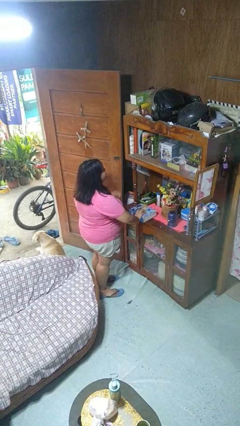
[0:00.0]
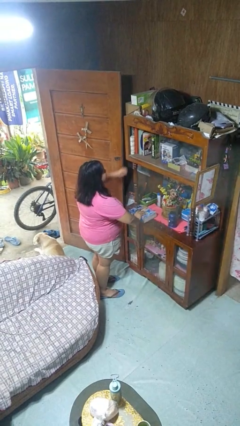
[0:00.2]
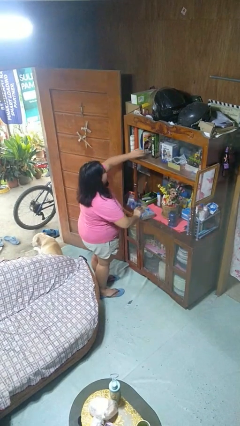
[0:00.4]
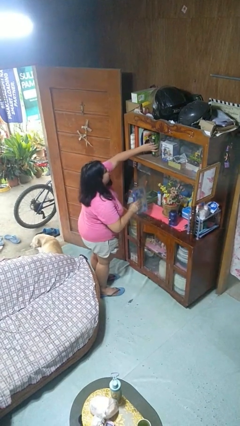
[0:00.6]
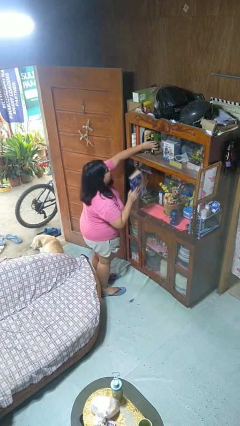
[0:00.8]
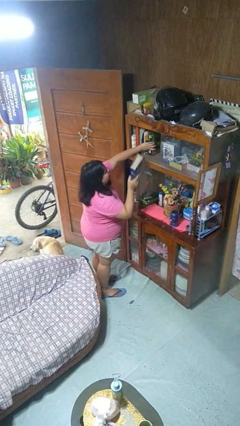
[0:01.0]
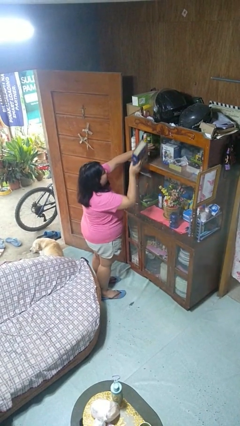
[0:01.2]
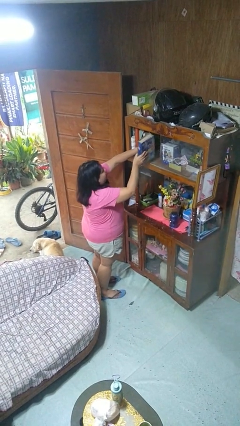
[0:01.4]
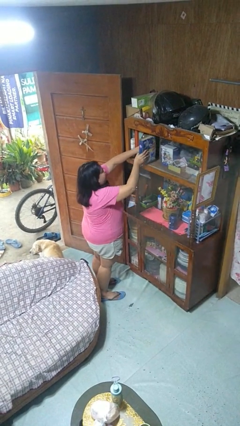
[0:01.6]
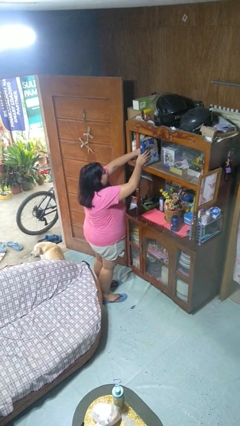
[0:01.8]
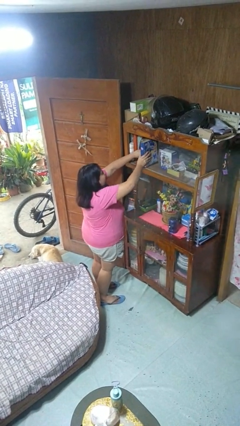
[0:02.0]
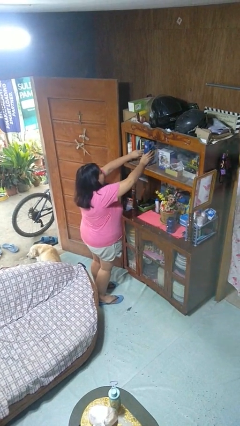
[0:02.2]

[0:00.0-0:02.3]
person puts down object on shelf

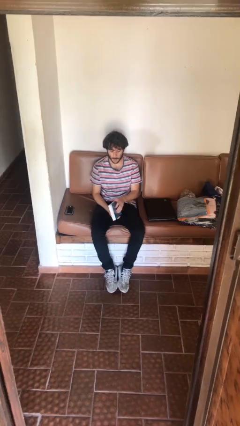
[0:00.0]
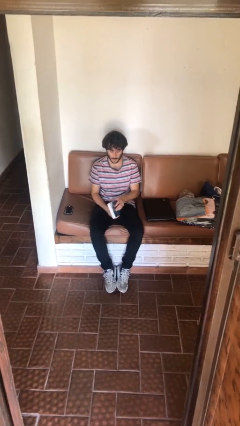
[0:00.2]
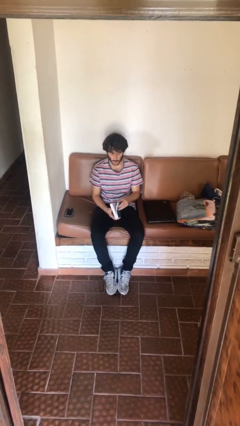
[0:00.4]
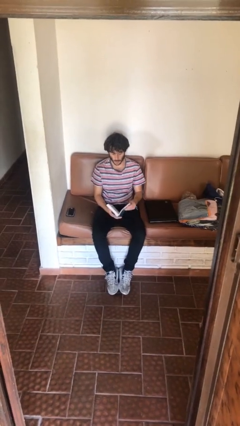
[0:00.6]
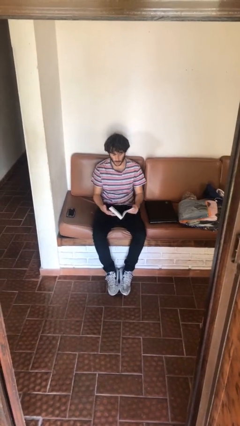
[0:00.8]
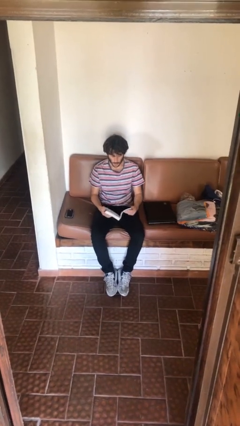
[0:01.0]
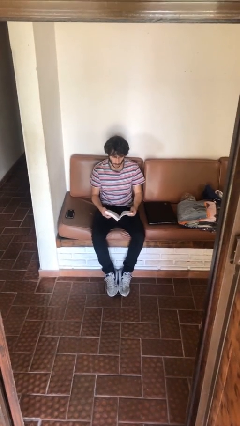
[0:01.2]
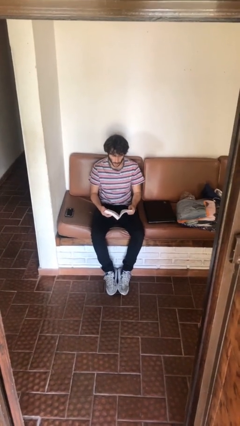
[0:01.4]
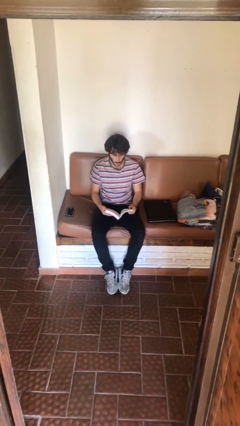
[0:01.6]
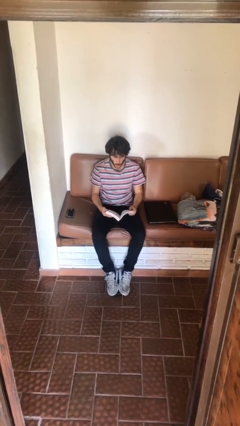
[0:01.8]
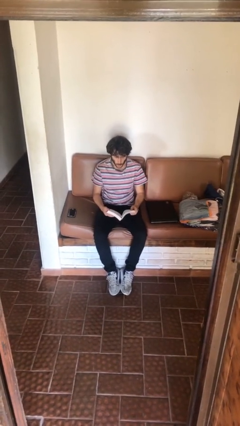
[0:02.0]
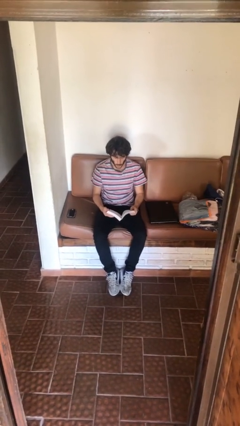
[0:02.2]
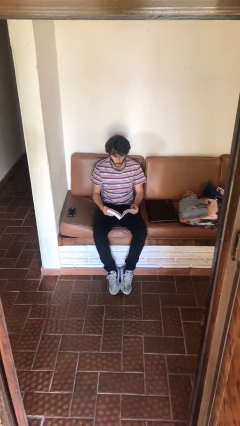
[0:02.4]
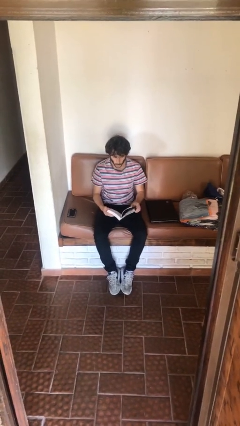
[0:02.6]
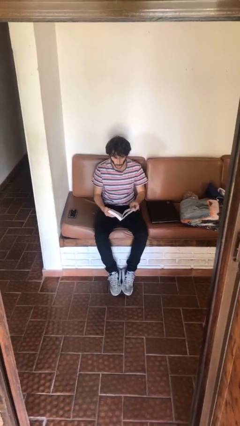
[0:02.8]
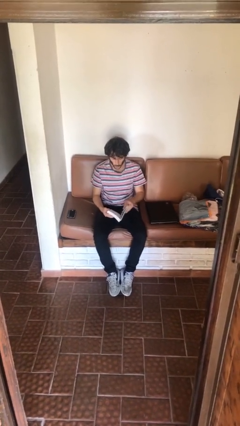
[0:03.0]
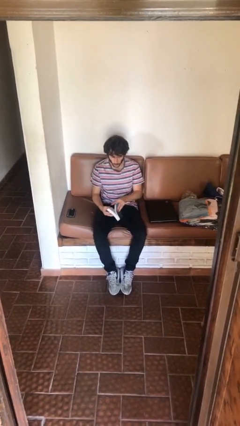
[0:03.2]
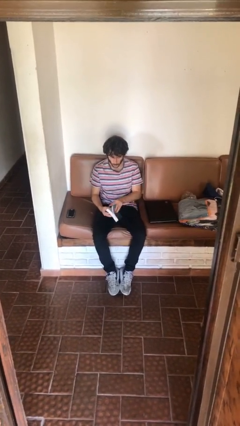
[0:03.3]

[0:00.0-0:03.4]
person reads document

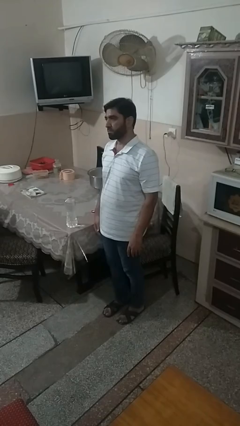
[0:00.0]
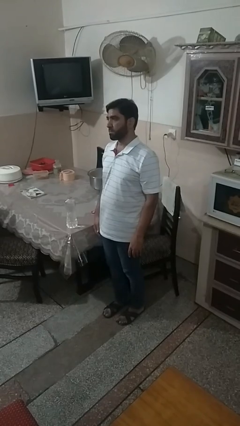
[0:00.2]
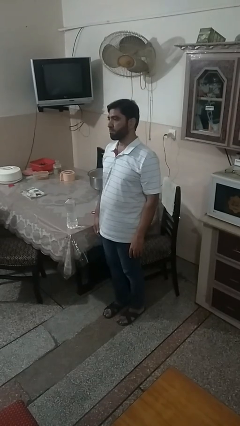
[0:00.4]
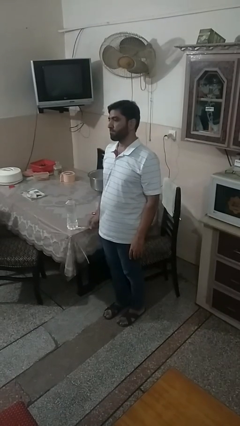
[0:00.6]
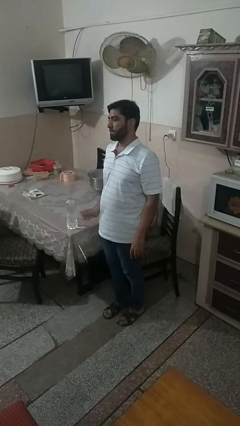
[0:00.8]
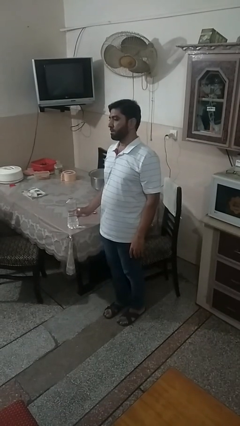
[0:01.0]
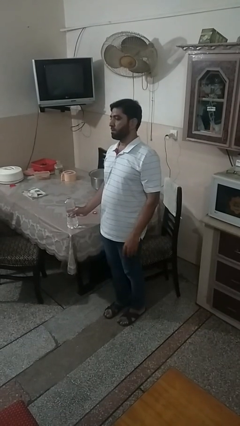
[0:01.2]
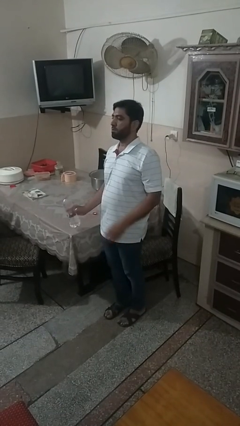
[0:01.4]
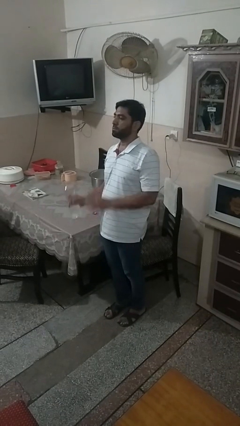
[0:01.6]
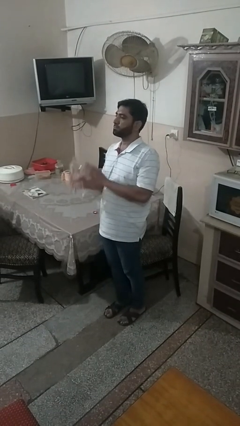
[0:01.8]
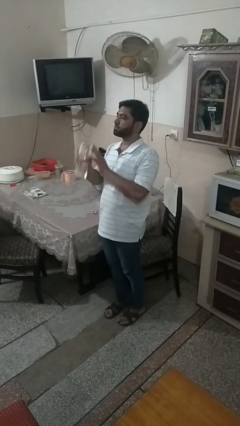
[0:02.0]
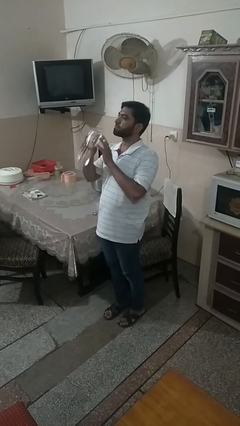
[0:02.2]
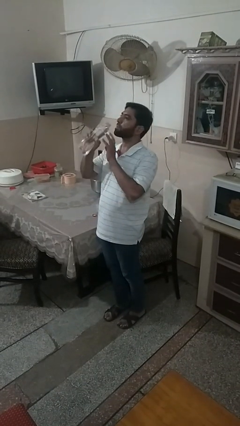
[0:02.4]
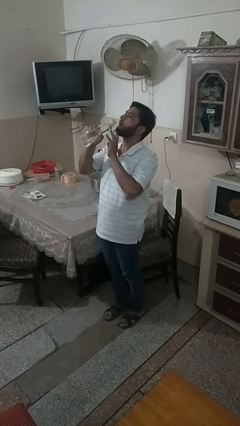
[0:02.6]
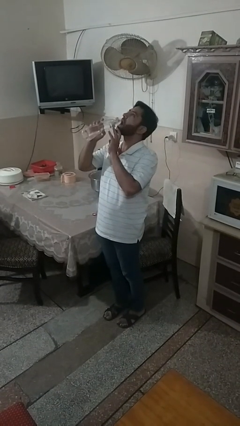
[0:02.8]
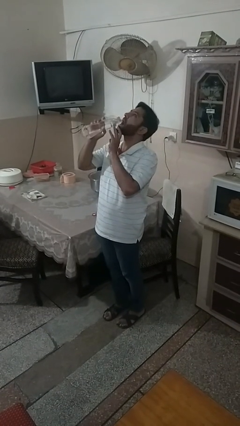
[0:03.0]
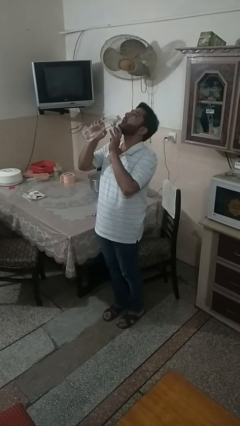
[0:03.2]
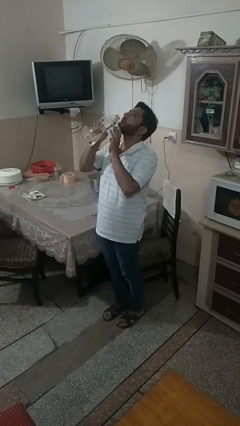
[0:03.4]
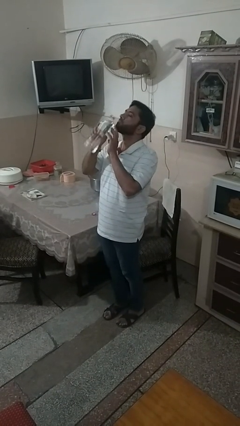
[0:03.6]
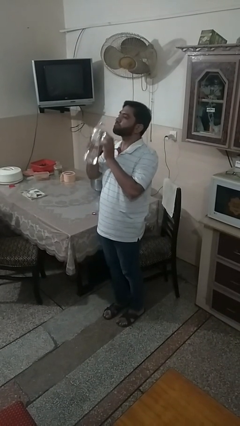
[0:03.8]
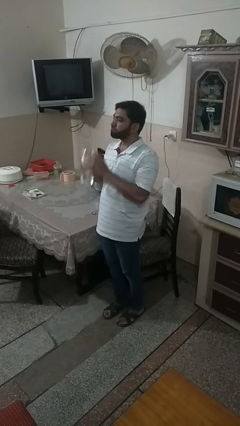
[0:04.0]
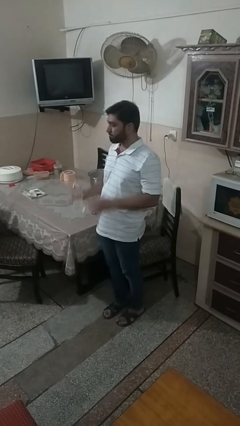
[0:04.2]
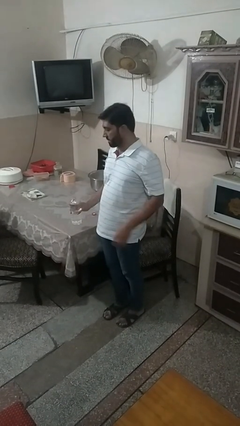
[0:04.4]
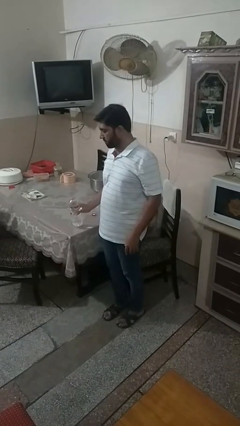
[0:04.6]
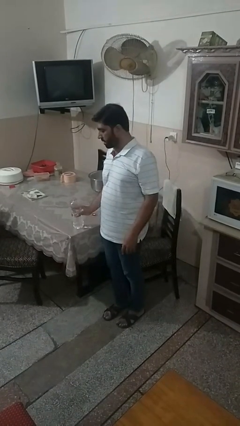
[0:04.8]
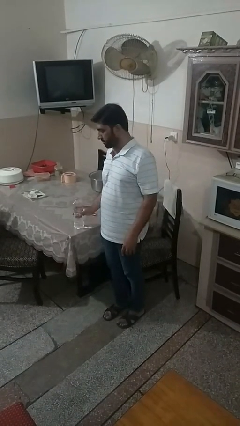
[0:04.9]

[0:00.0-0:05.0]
person drinks from bottle

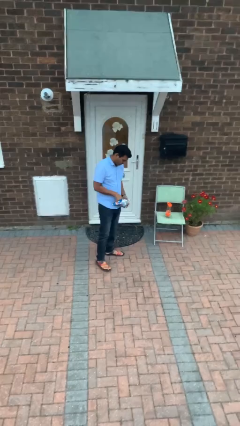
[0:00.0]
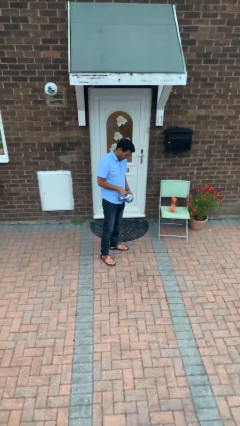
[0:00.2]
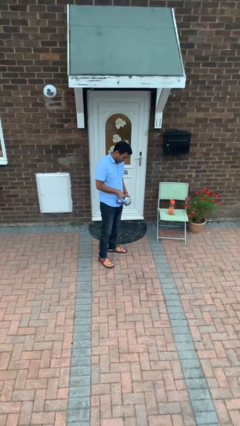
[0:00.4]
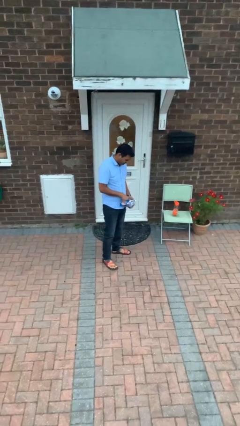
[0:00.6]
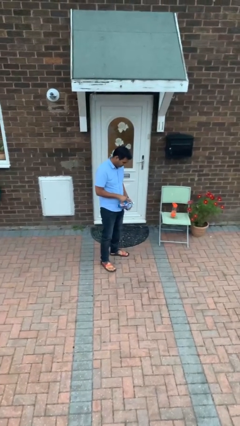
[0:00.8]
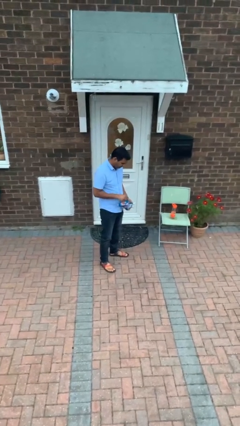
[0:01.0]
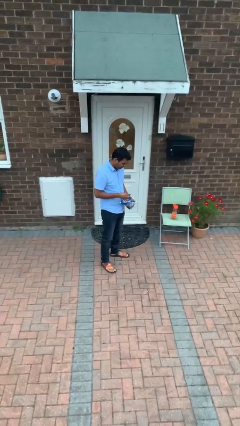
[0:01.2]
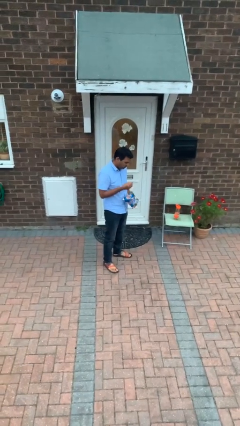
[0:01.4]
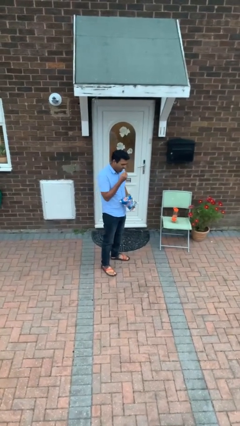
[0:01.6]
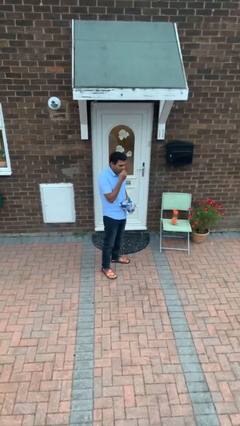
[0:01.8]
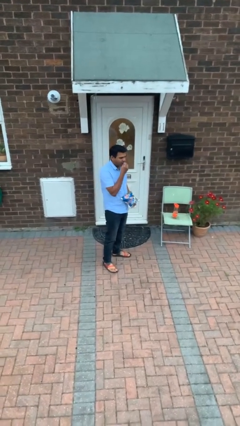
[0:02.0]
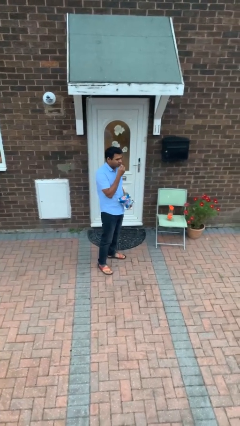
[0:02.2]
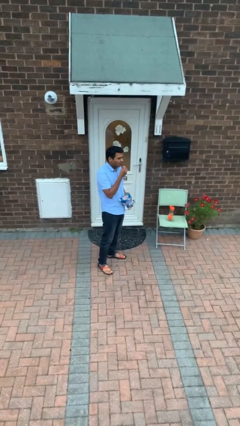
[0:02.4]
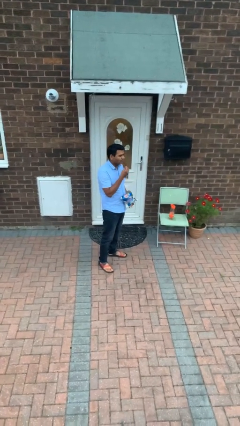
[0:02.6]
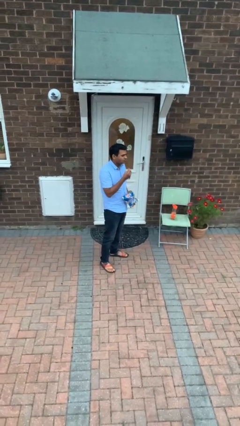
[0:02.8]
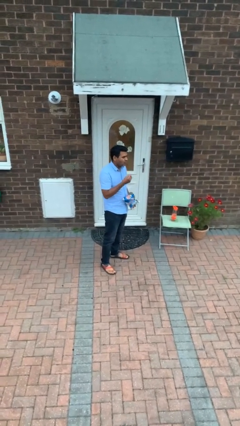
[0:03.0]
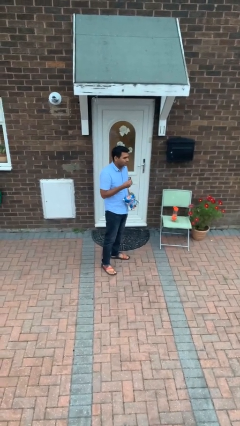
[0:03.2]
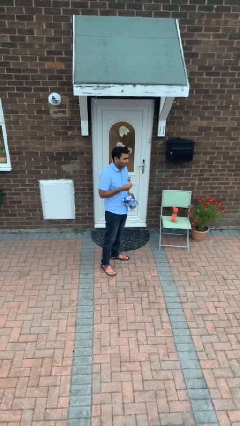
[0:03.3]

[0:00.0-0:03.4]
person eats snack from bag

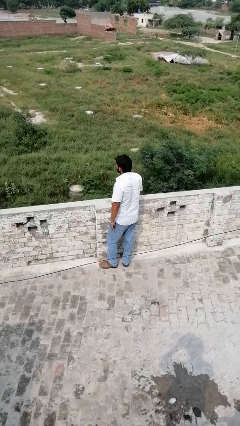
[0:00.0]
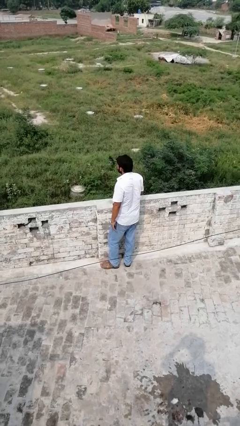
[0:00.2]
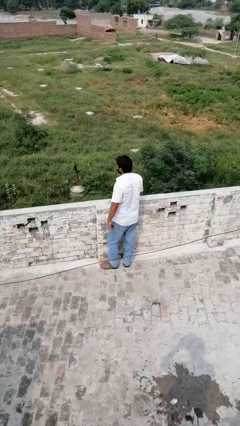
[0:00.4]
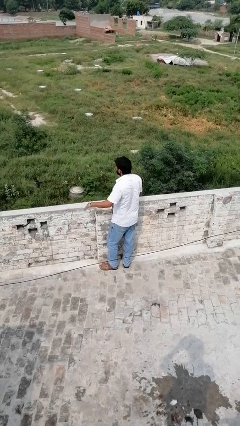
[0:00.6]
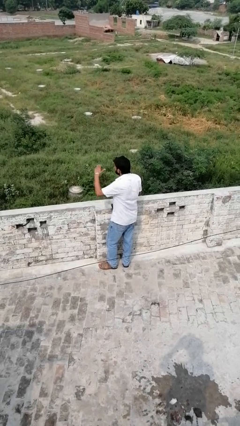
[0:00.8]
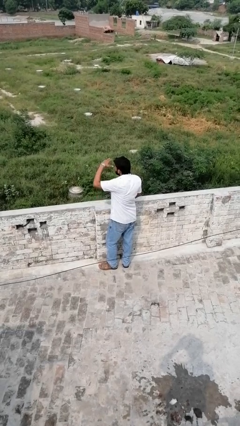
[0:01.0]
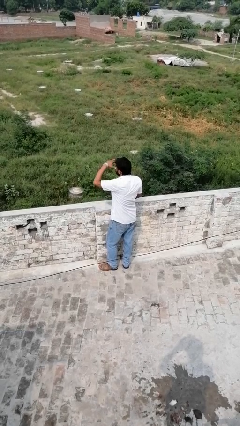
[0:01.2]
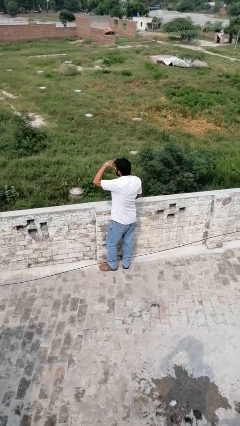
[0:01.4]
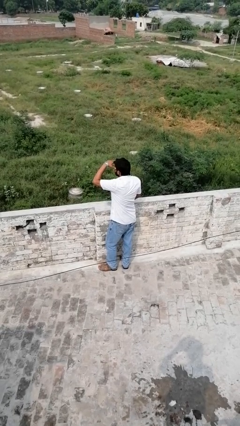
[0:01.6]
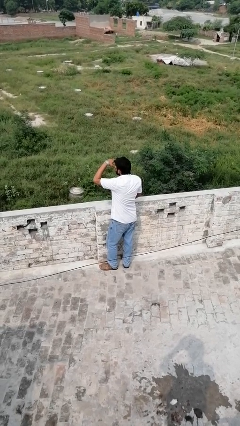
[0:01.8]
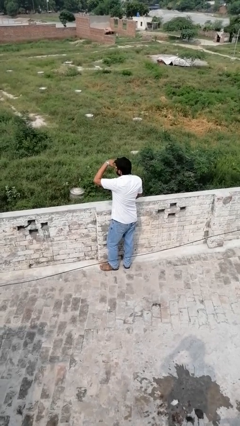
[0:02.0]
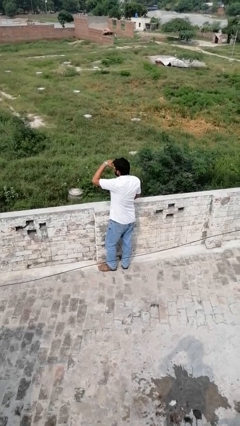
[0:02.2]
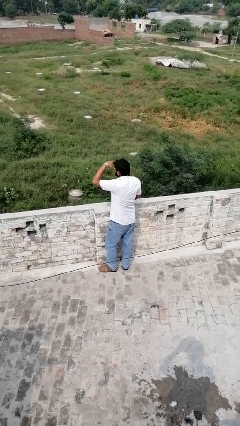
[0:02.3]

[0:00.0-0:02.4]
person shades eyes

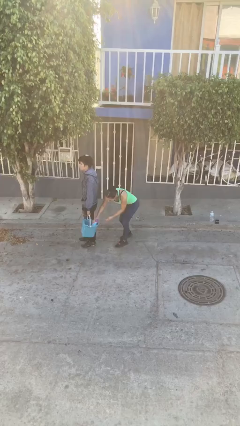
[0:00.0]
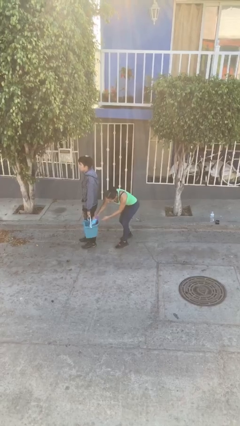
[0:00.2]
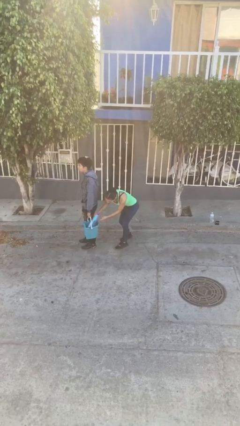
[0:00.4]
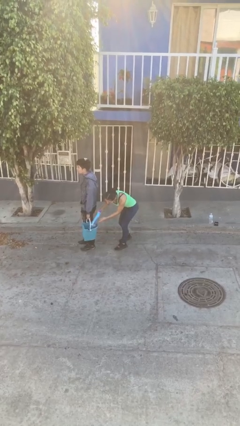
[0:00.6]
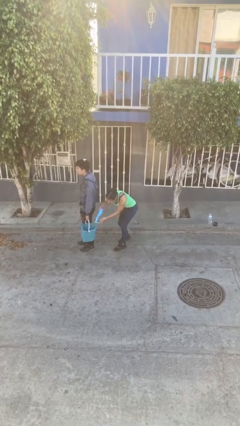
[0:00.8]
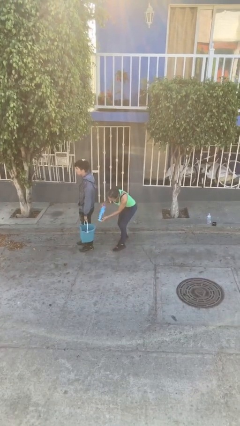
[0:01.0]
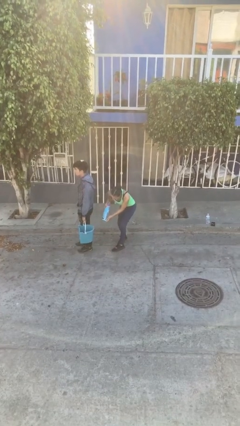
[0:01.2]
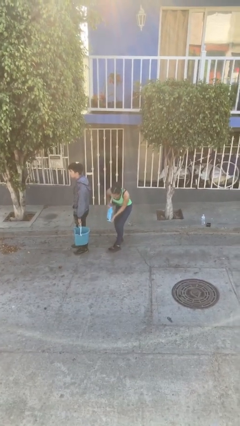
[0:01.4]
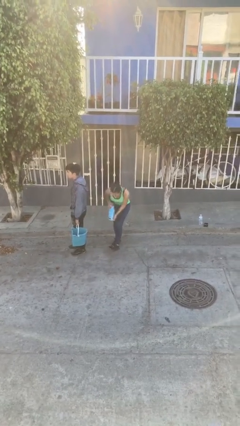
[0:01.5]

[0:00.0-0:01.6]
person steals object from person
